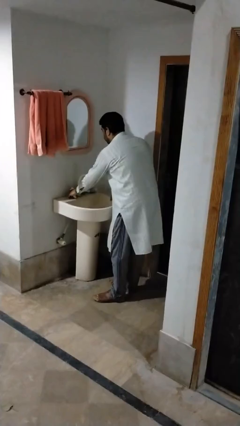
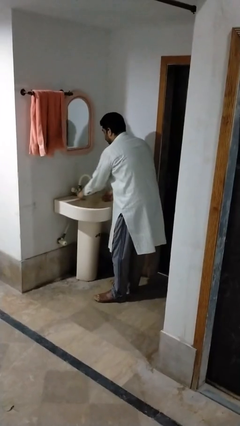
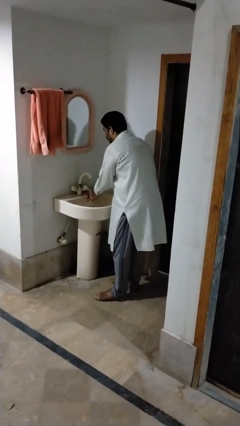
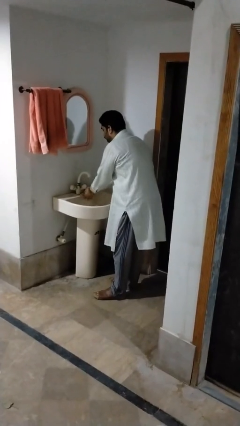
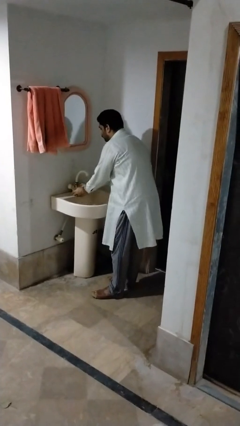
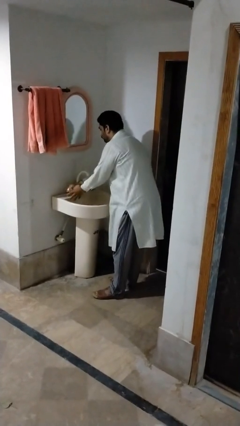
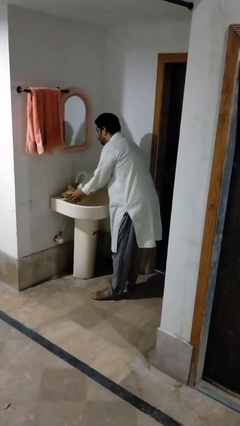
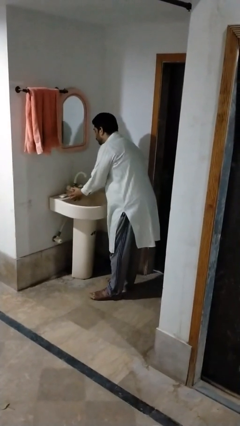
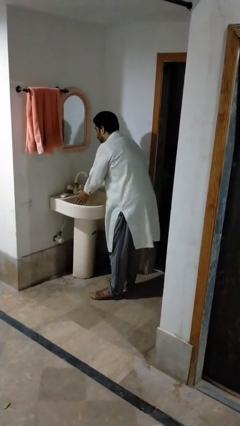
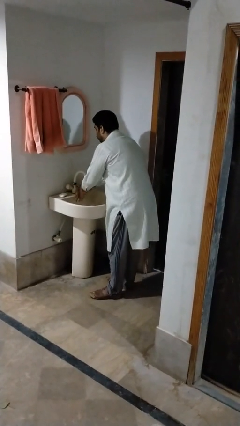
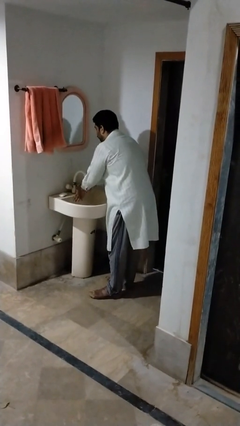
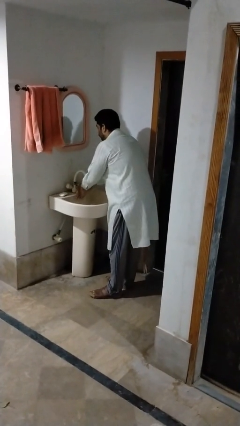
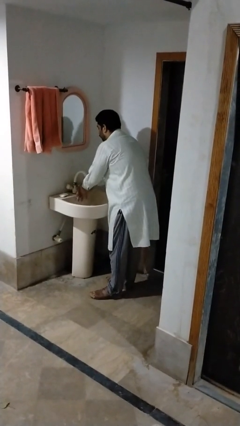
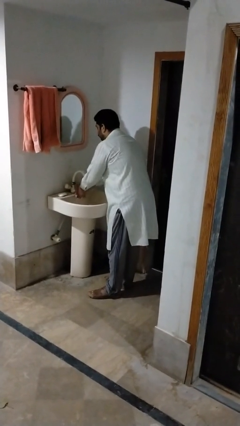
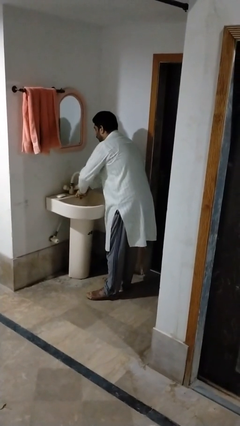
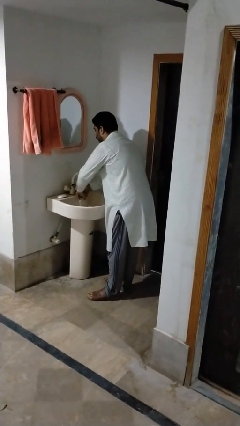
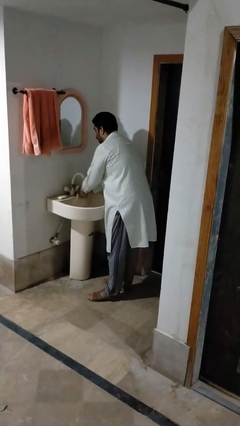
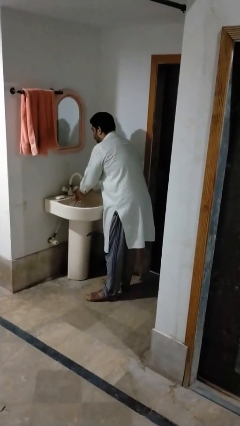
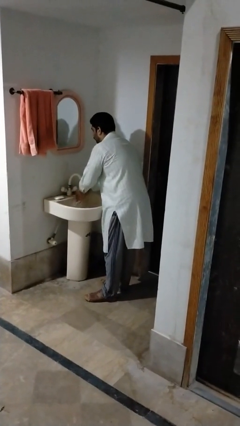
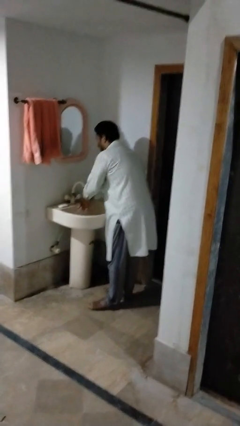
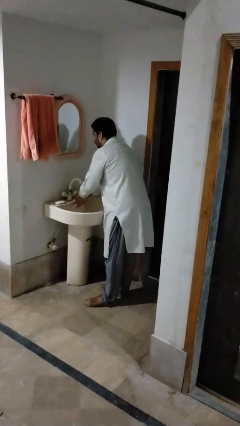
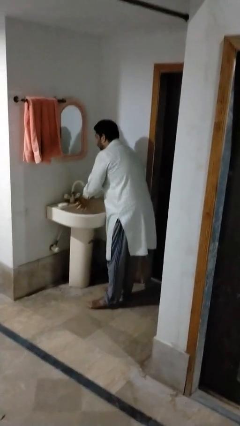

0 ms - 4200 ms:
person washes hands

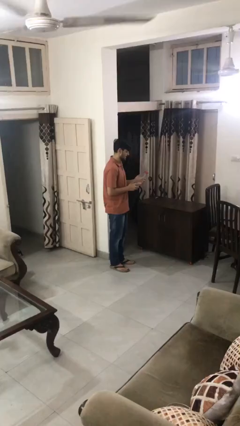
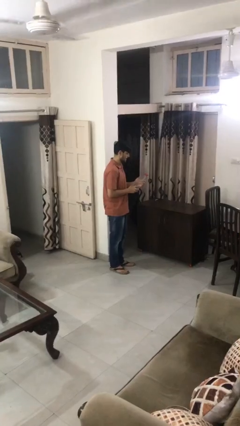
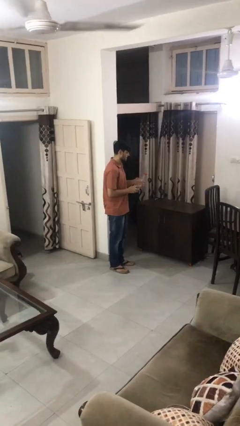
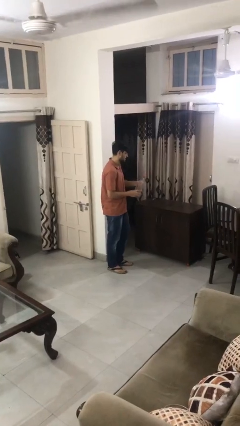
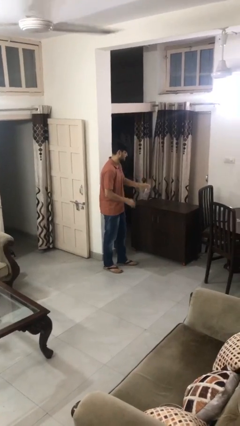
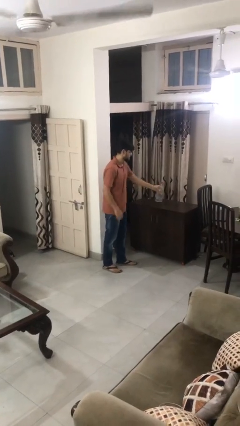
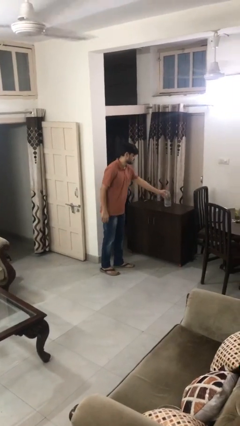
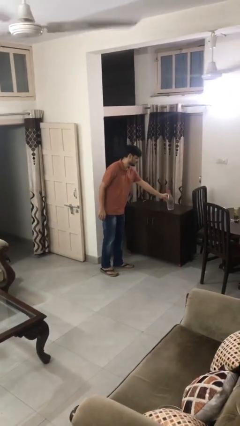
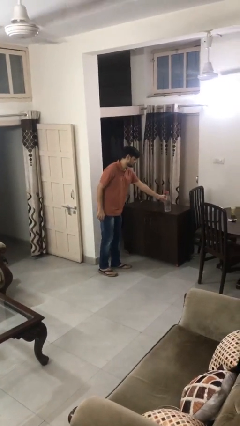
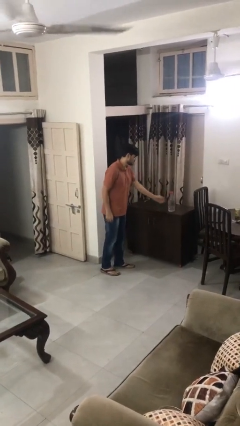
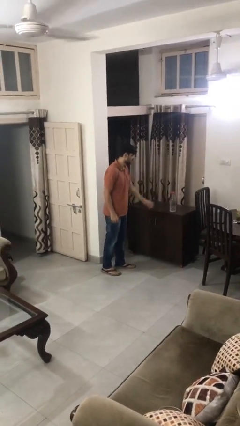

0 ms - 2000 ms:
person puts down object on countertop

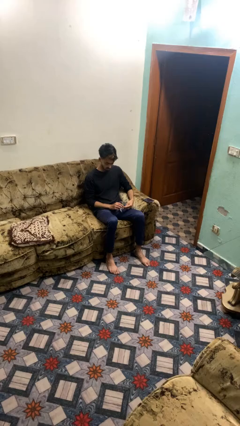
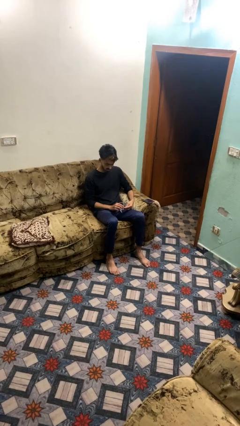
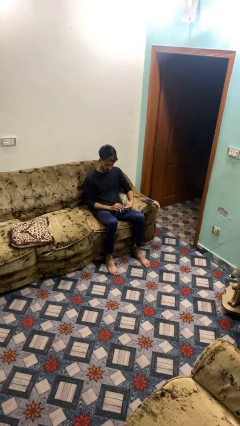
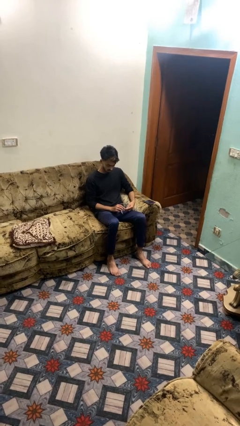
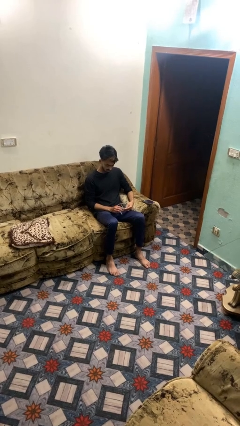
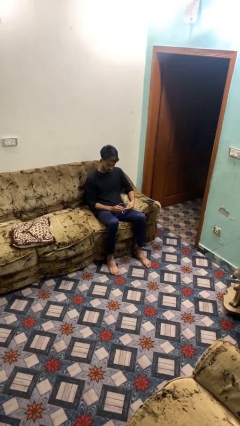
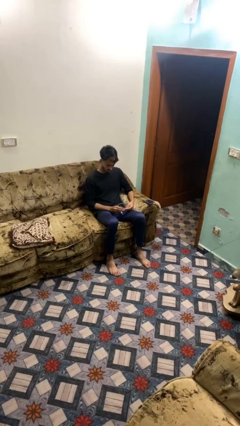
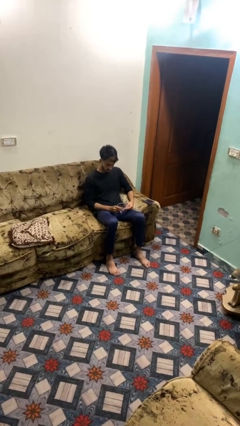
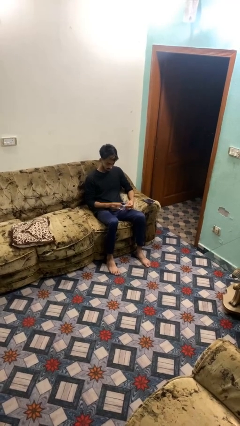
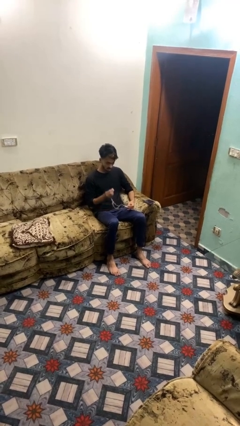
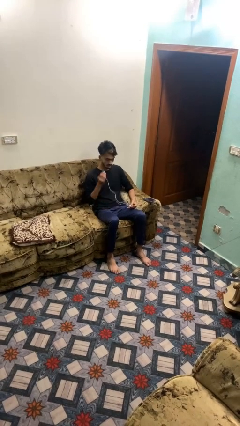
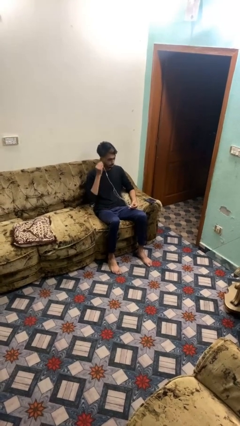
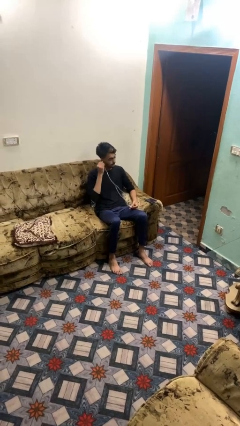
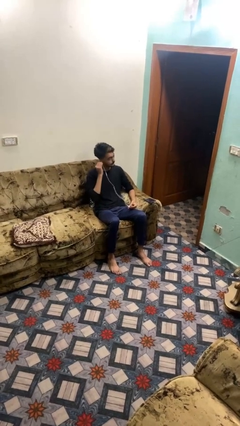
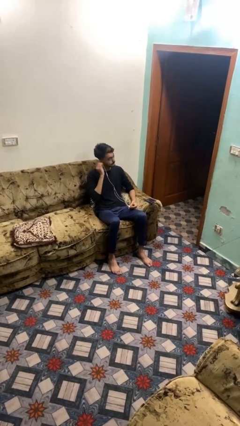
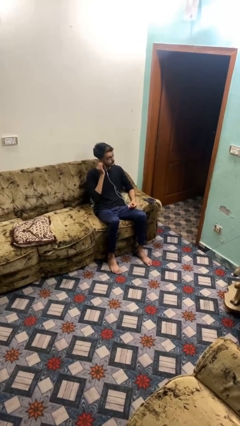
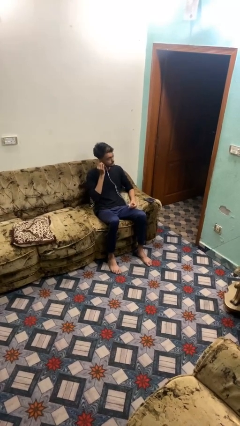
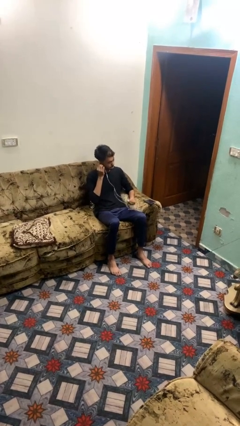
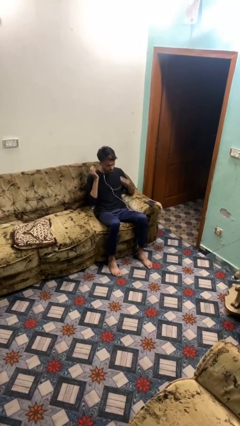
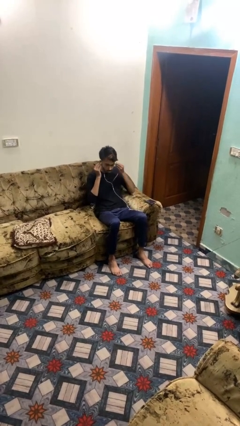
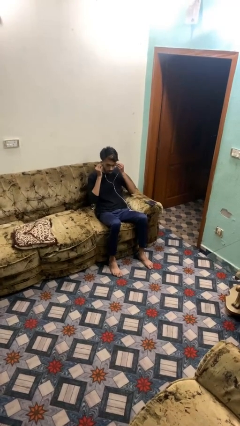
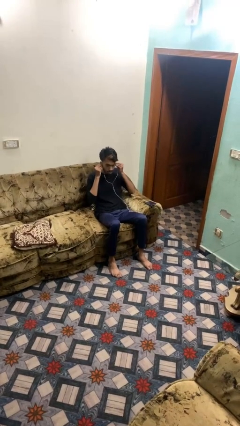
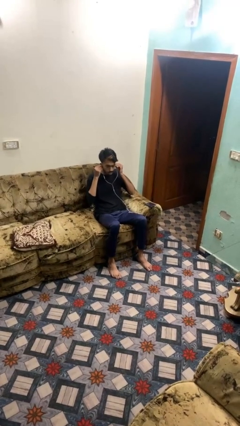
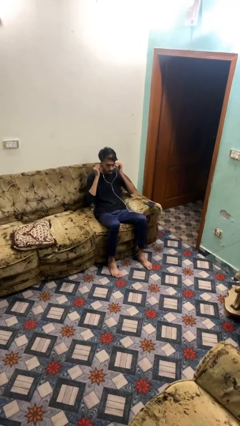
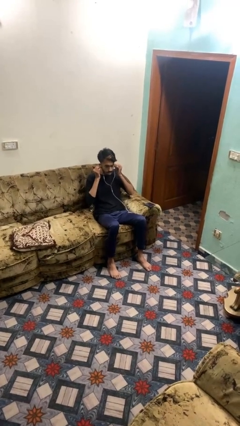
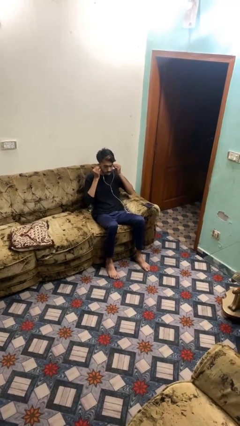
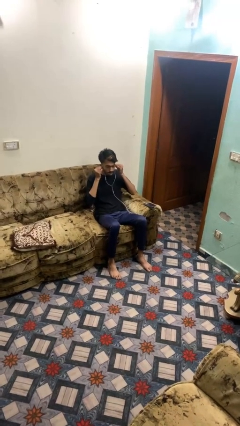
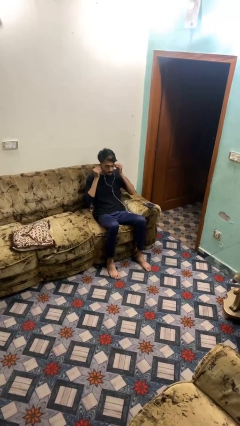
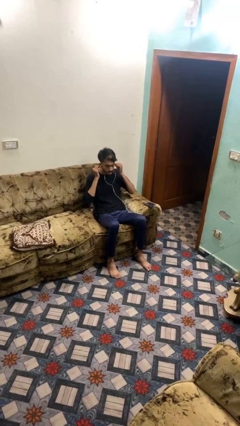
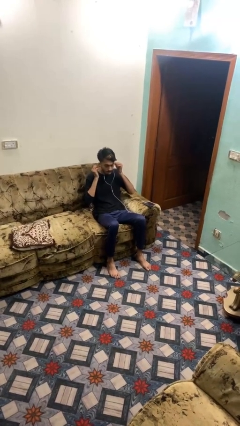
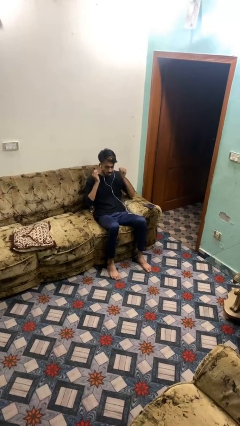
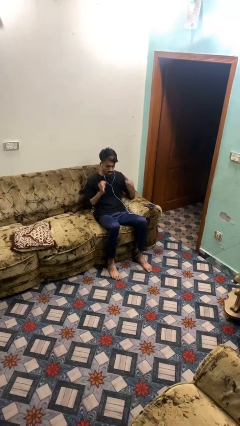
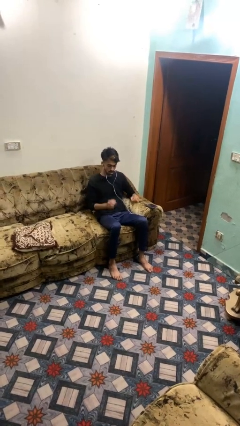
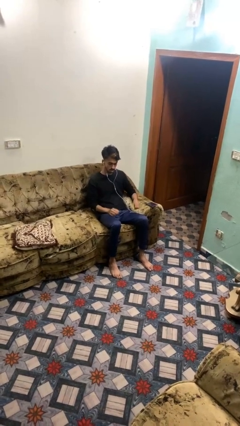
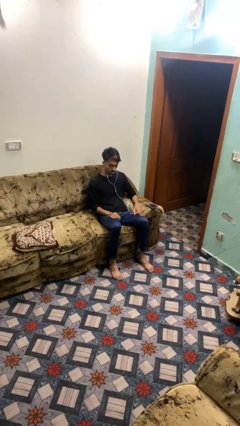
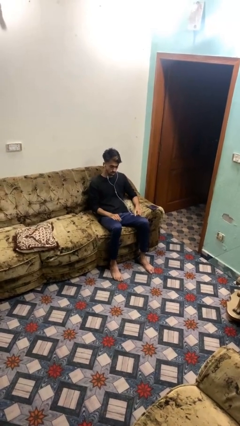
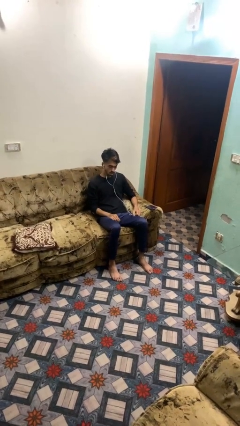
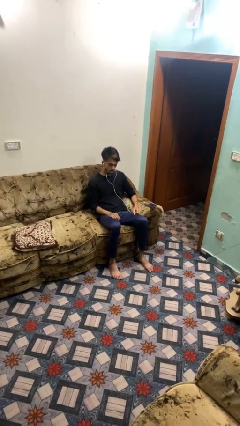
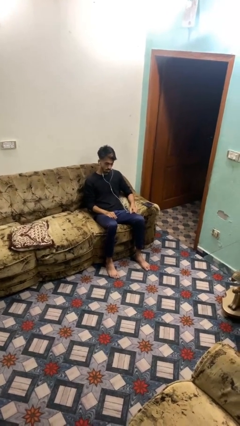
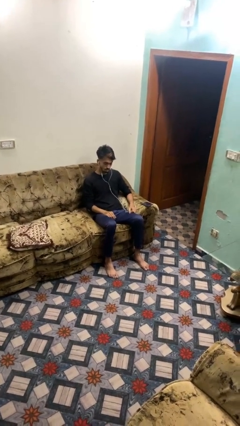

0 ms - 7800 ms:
person puts on headphones

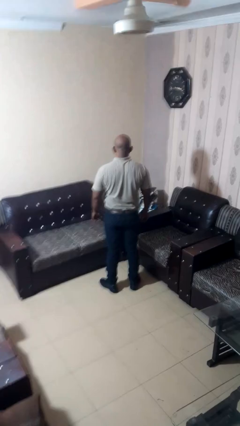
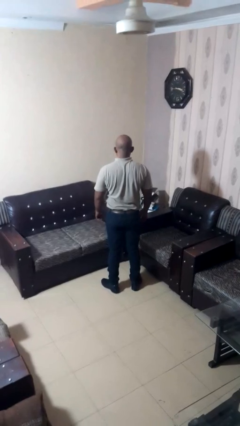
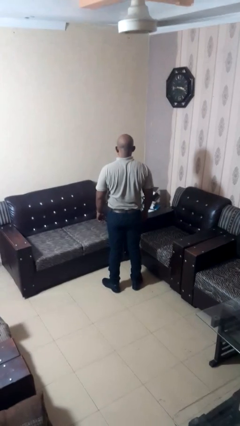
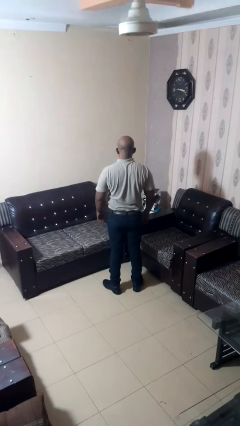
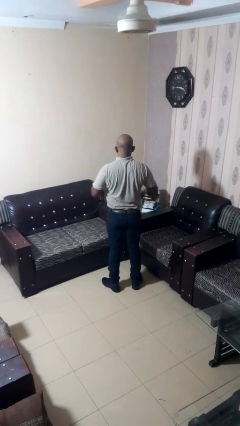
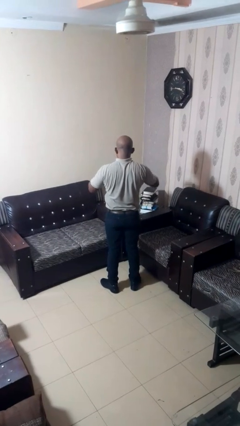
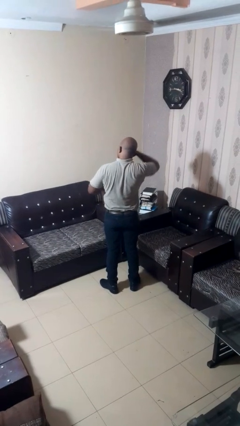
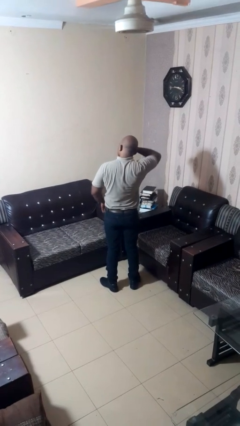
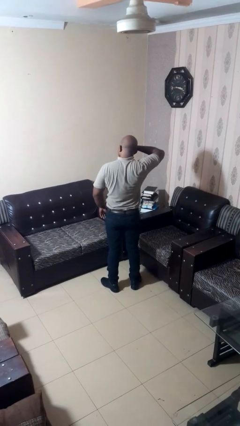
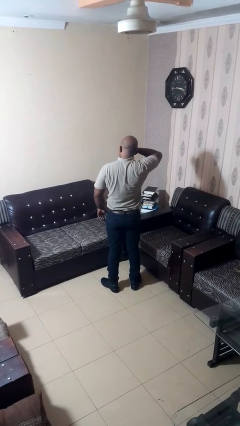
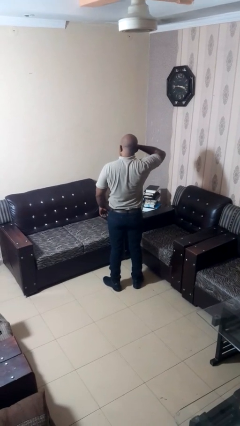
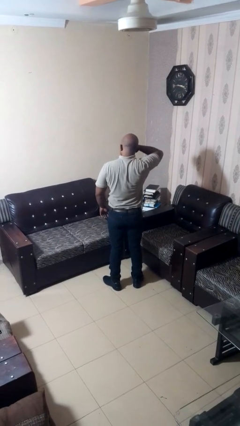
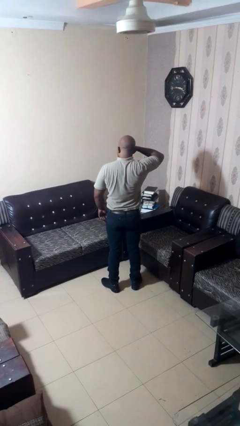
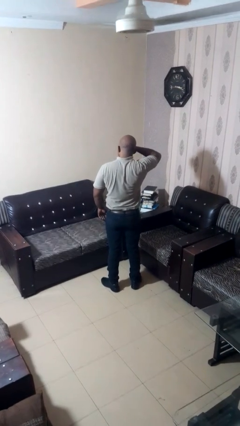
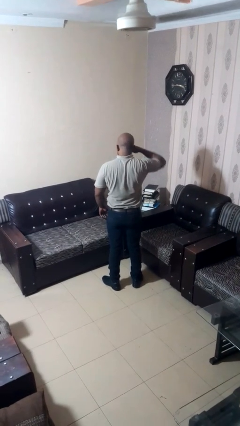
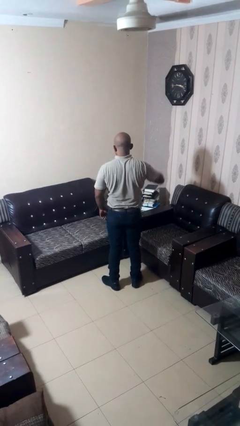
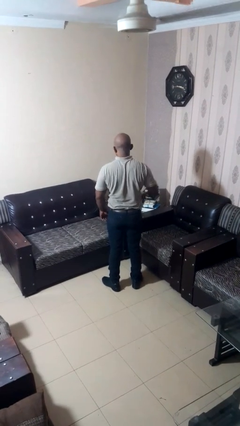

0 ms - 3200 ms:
person rubs eyes

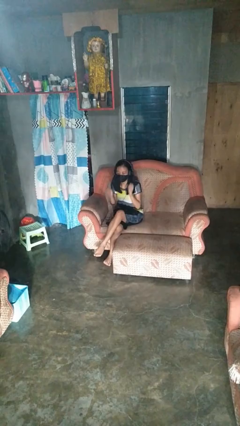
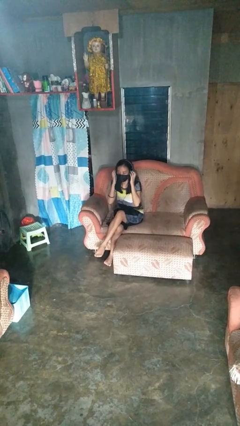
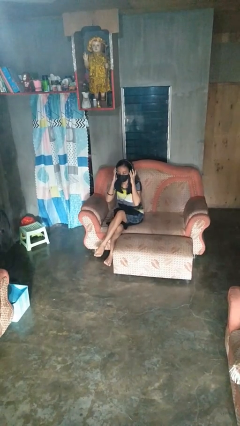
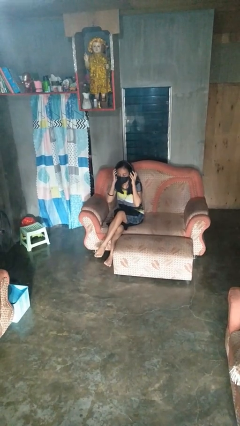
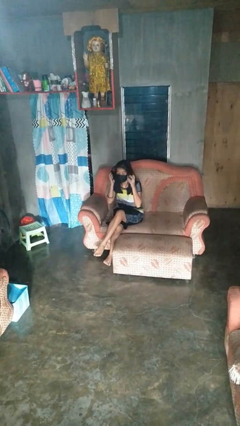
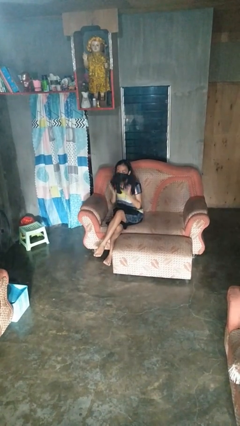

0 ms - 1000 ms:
person takes off headphones
